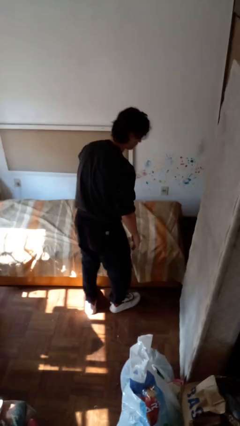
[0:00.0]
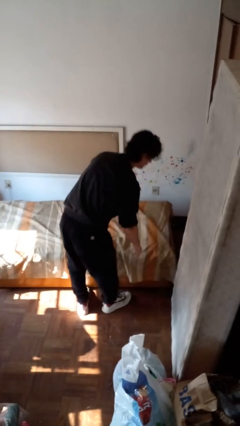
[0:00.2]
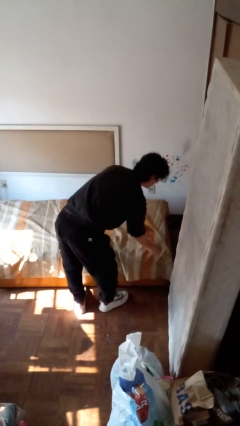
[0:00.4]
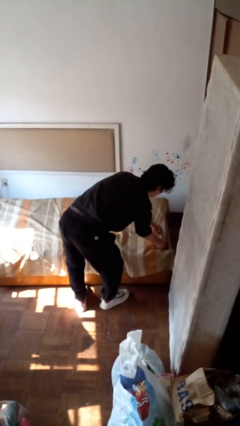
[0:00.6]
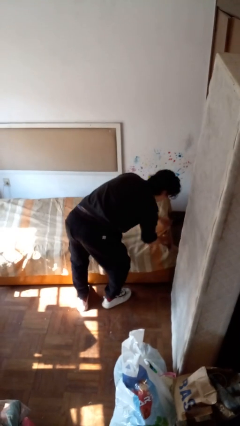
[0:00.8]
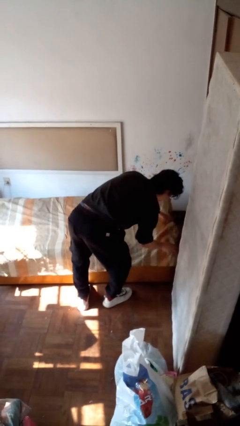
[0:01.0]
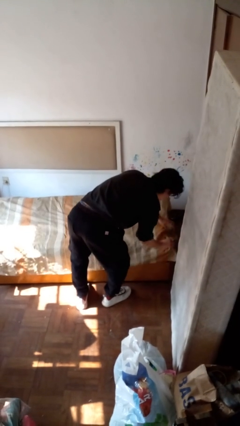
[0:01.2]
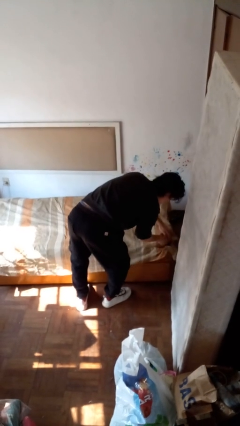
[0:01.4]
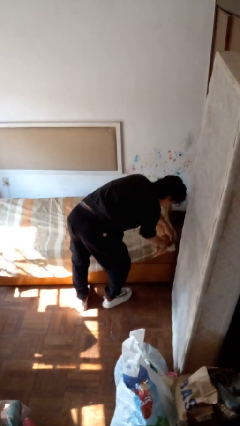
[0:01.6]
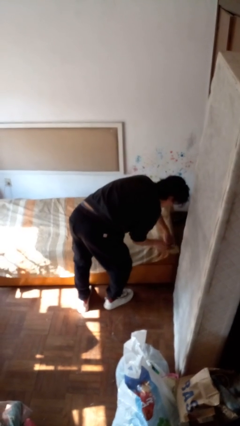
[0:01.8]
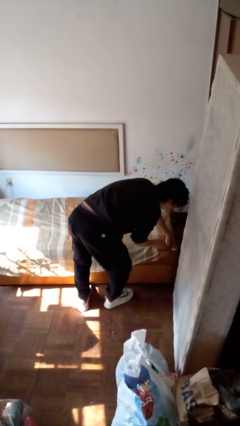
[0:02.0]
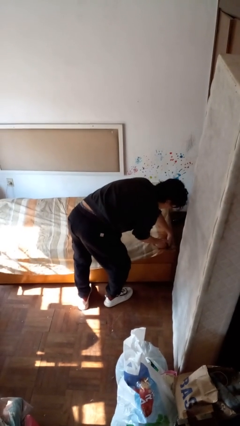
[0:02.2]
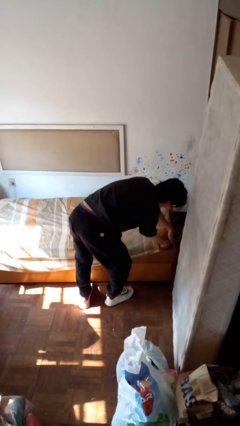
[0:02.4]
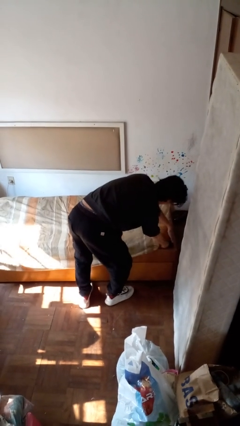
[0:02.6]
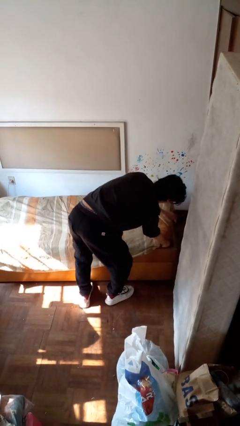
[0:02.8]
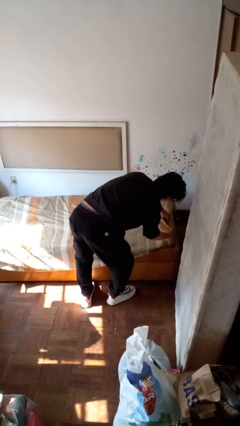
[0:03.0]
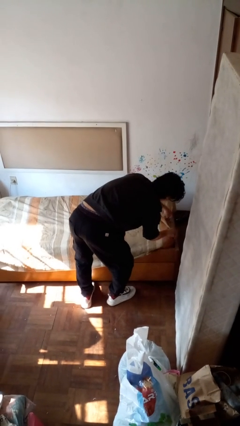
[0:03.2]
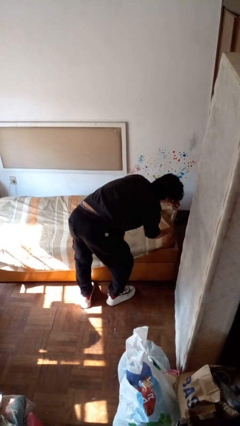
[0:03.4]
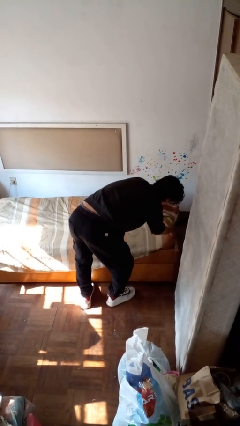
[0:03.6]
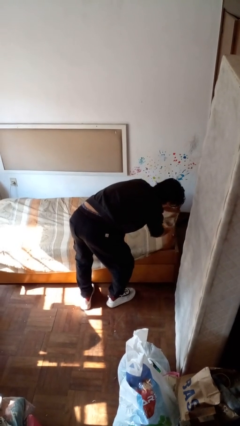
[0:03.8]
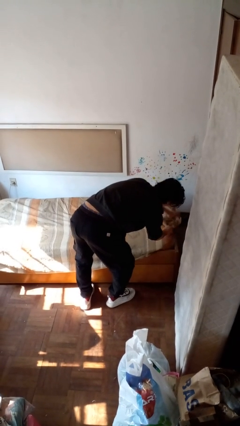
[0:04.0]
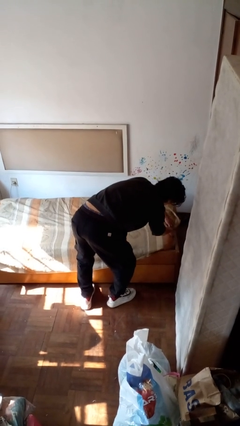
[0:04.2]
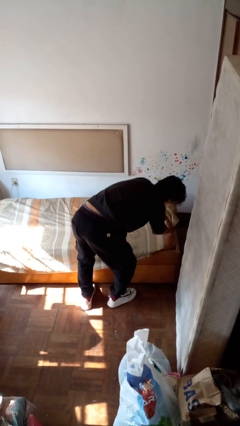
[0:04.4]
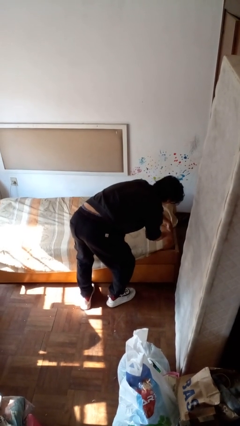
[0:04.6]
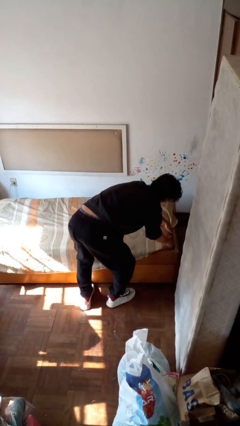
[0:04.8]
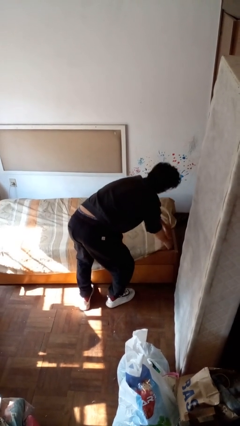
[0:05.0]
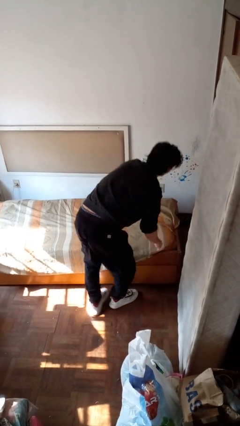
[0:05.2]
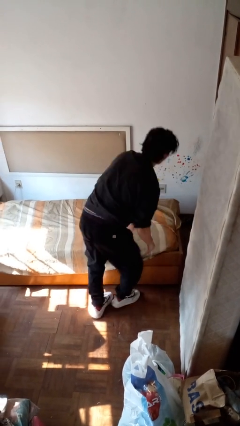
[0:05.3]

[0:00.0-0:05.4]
person makes bed

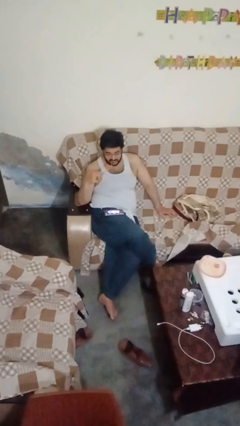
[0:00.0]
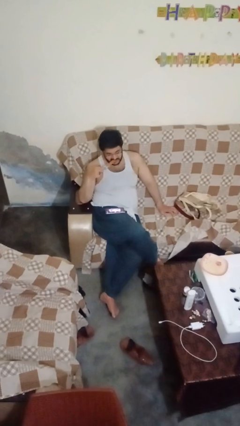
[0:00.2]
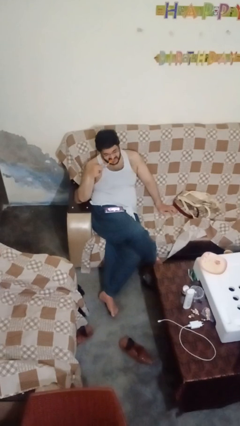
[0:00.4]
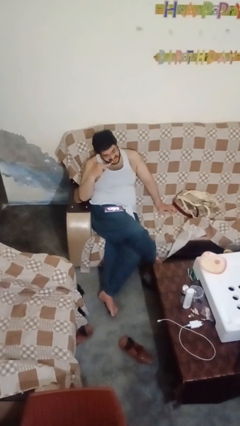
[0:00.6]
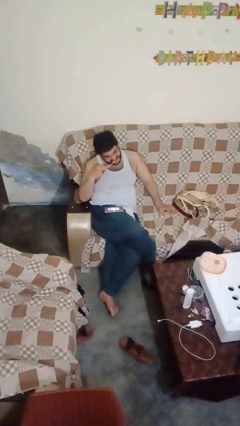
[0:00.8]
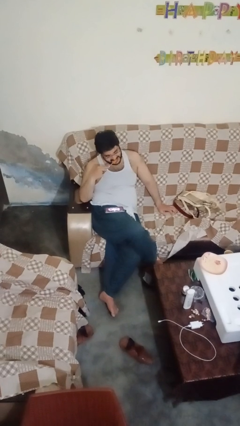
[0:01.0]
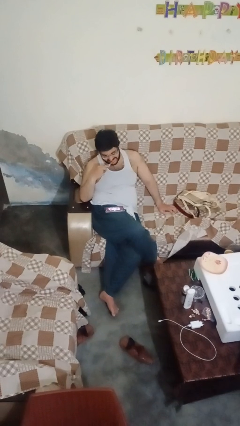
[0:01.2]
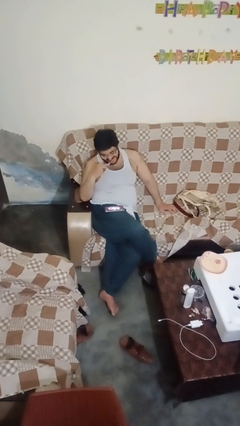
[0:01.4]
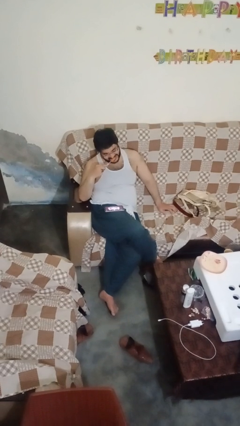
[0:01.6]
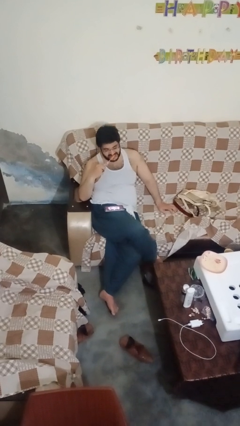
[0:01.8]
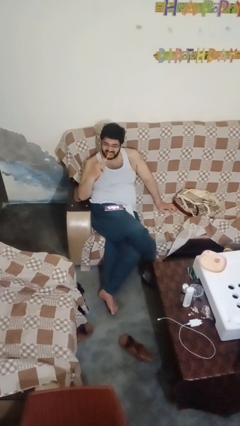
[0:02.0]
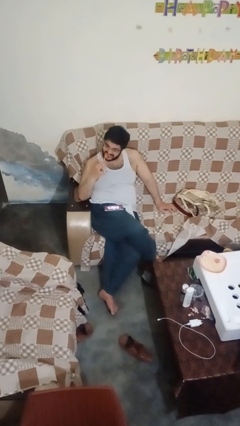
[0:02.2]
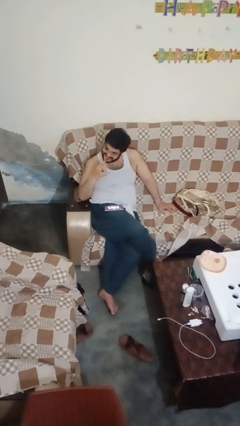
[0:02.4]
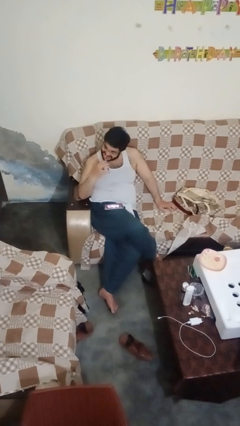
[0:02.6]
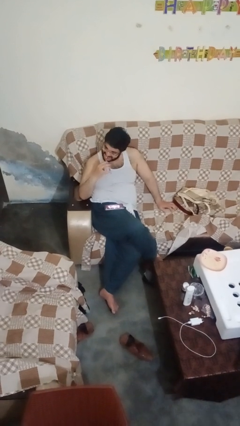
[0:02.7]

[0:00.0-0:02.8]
person brushes teeth

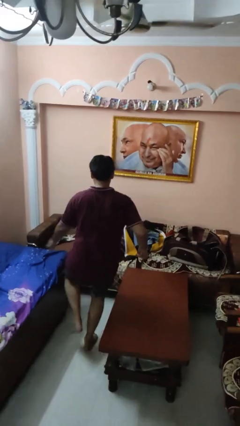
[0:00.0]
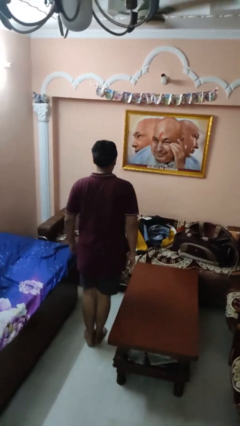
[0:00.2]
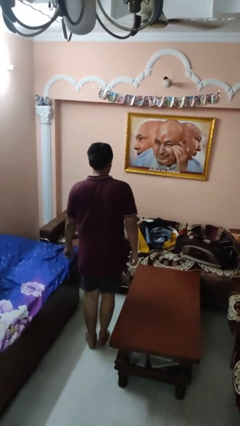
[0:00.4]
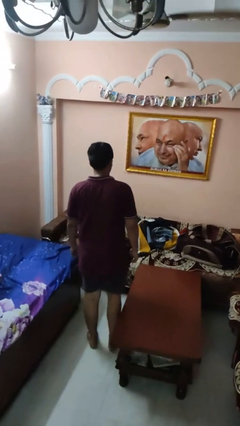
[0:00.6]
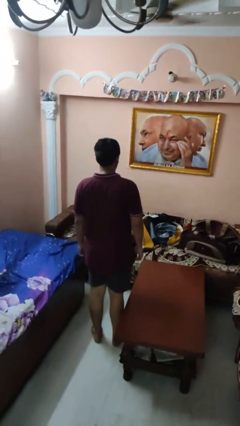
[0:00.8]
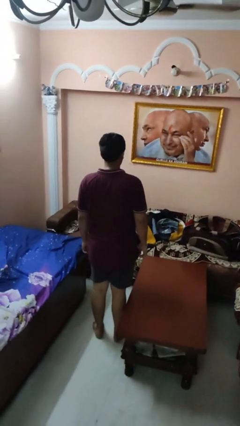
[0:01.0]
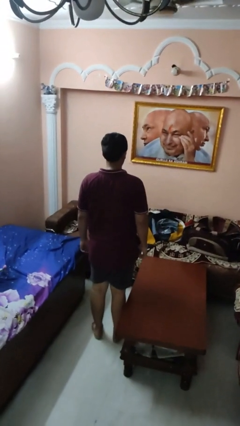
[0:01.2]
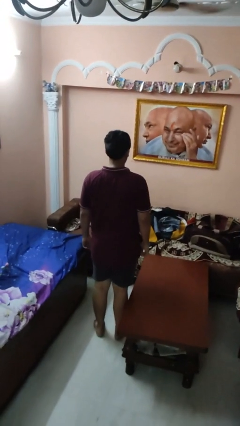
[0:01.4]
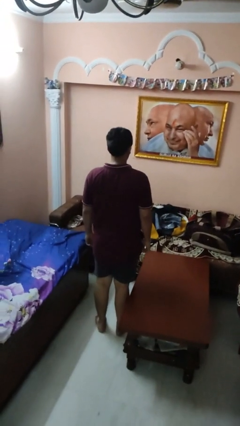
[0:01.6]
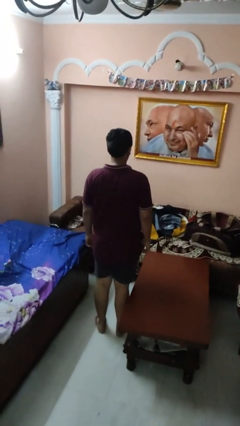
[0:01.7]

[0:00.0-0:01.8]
person climbs off table

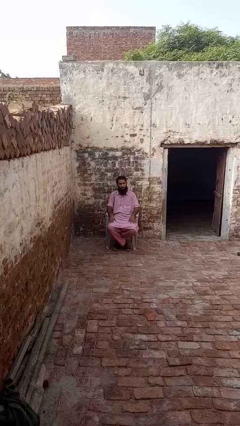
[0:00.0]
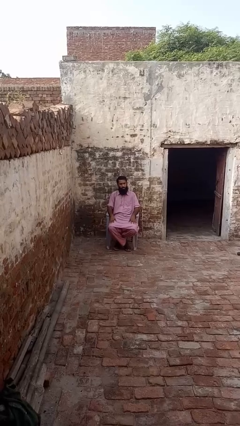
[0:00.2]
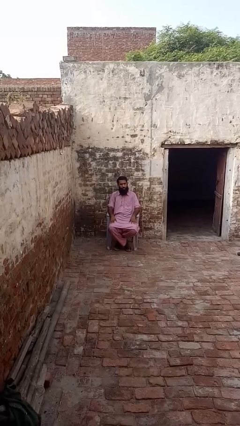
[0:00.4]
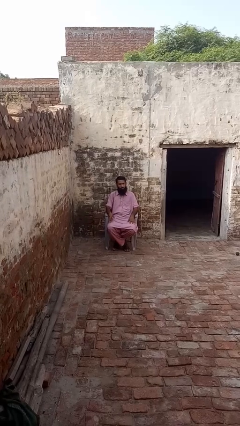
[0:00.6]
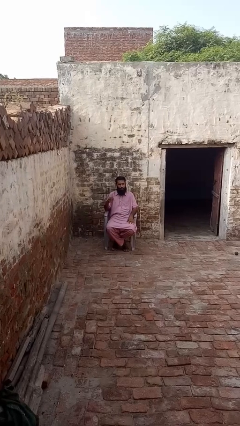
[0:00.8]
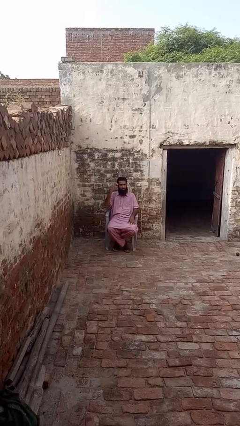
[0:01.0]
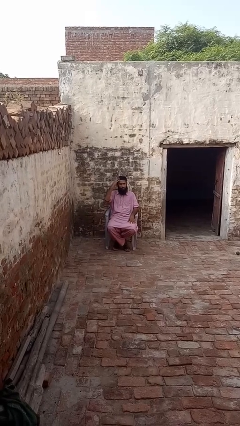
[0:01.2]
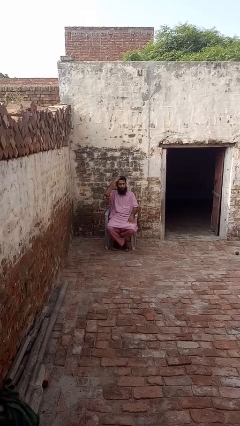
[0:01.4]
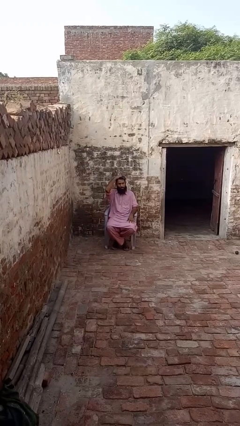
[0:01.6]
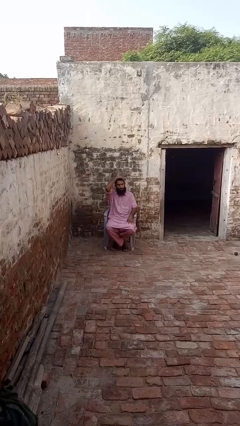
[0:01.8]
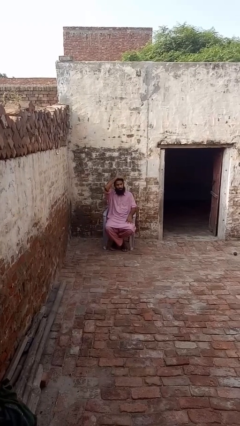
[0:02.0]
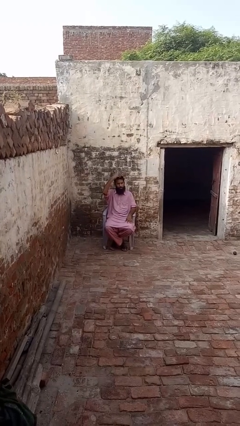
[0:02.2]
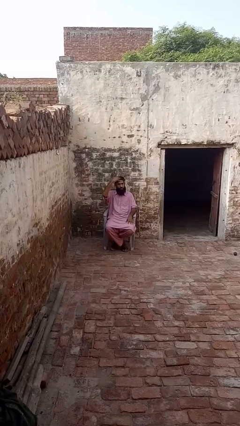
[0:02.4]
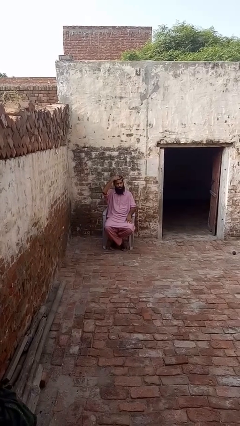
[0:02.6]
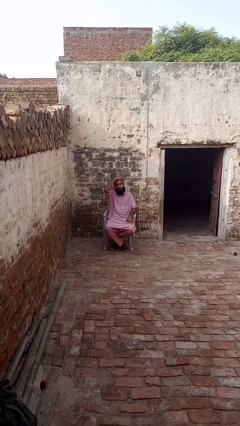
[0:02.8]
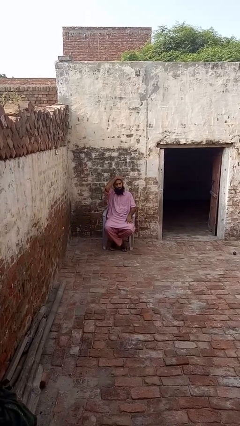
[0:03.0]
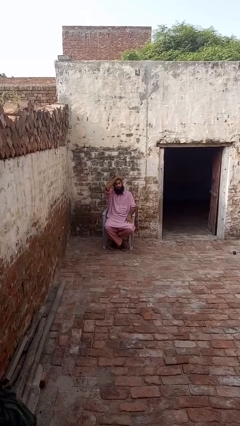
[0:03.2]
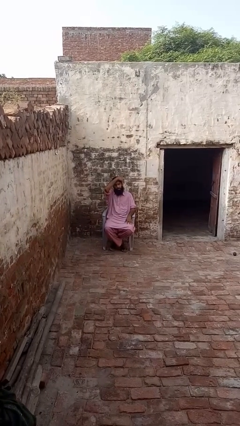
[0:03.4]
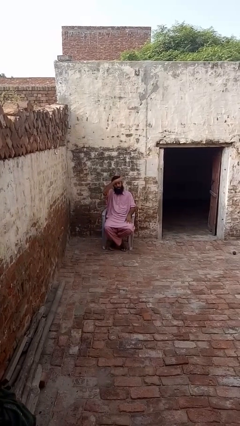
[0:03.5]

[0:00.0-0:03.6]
person strokes hair

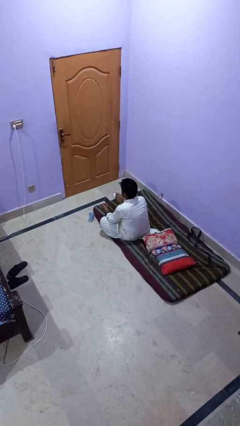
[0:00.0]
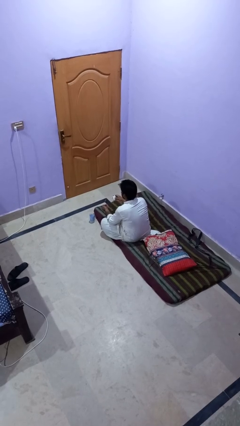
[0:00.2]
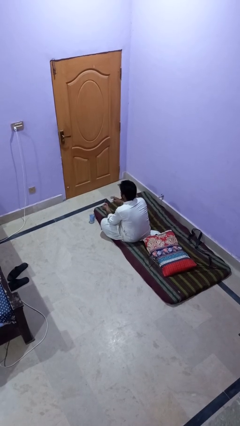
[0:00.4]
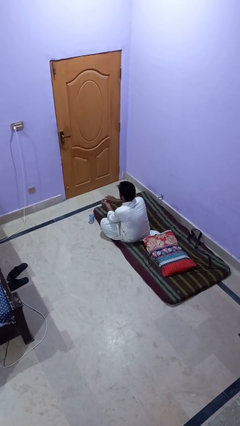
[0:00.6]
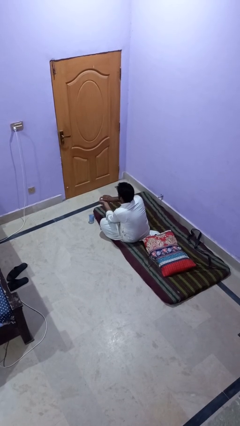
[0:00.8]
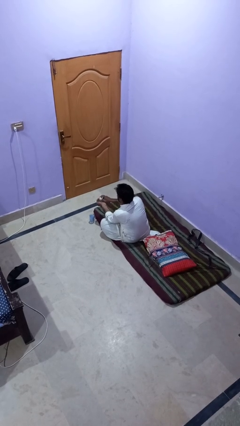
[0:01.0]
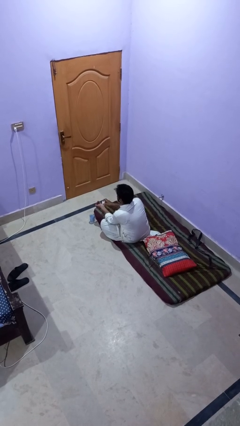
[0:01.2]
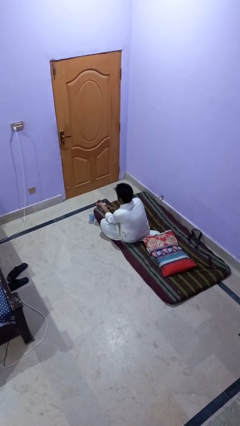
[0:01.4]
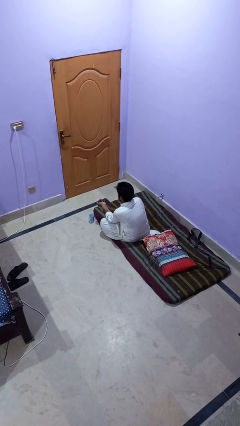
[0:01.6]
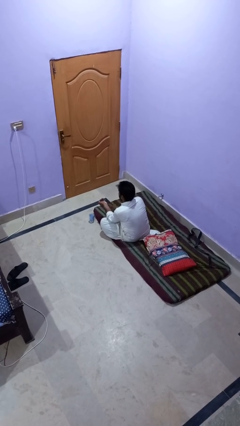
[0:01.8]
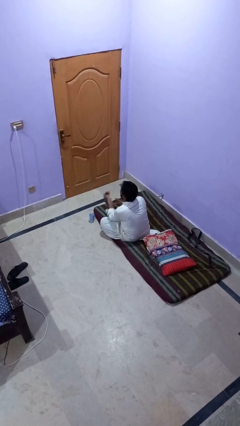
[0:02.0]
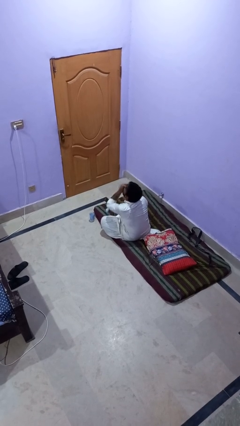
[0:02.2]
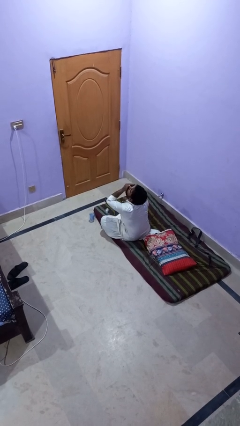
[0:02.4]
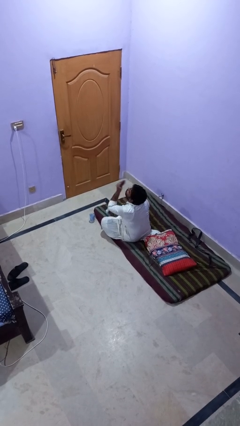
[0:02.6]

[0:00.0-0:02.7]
person takes medicine pills

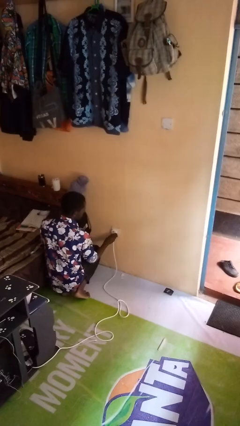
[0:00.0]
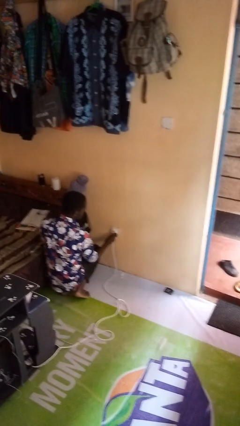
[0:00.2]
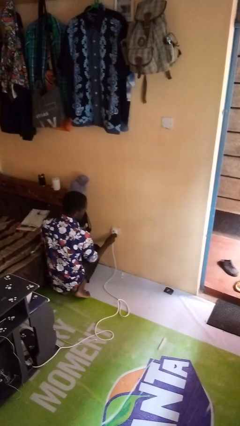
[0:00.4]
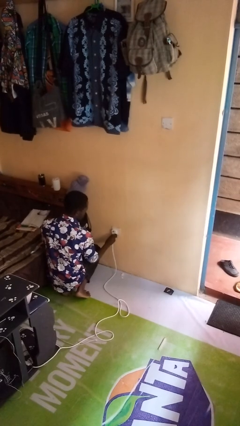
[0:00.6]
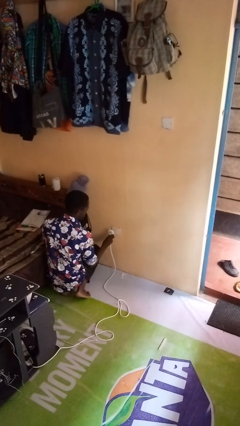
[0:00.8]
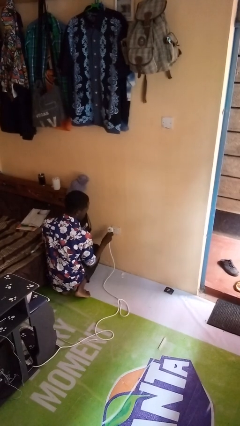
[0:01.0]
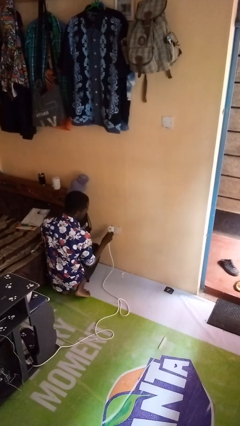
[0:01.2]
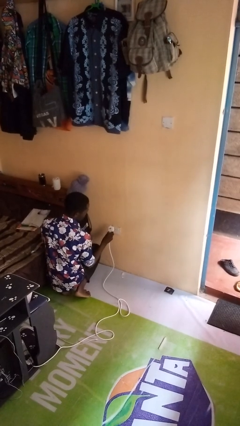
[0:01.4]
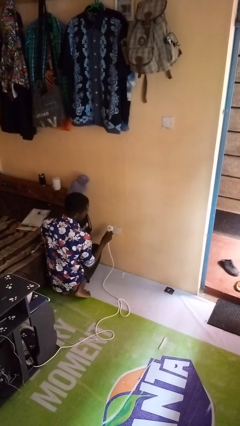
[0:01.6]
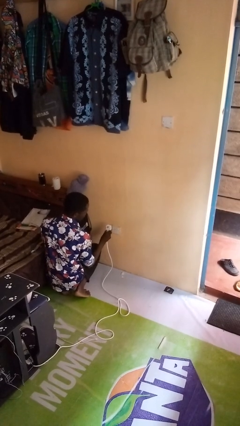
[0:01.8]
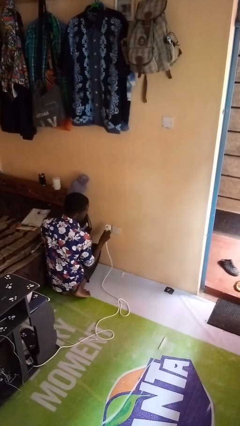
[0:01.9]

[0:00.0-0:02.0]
person unplugs from electrical socket
